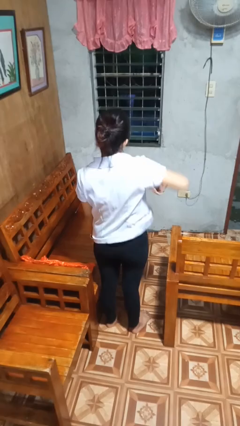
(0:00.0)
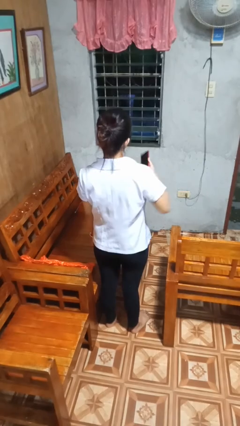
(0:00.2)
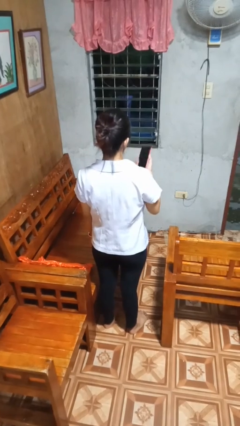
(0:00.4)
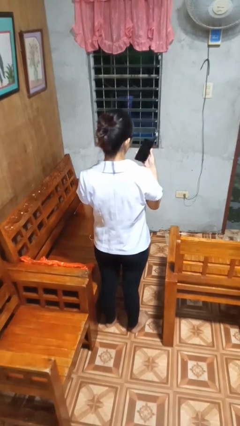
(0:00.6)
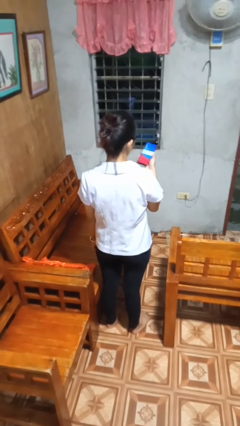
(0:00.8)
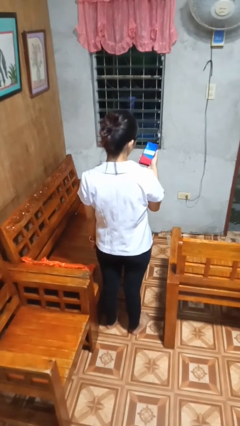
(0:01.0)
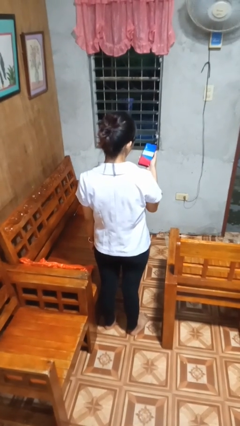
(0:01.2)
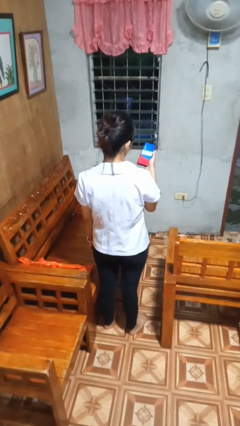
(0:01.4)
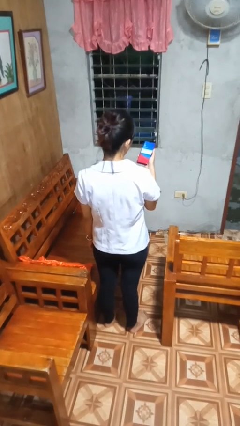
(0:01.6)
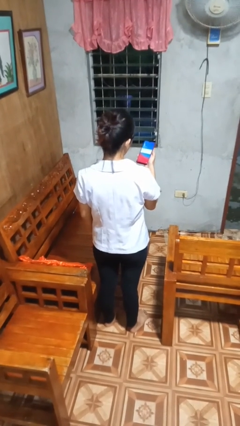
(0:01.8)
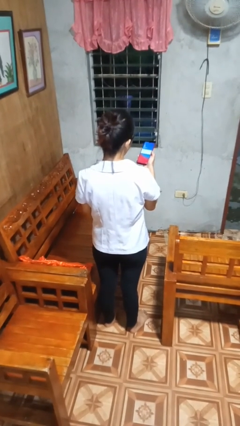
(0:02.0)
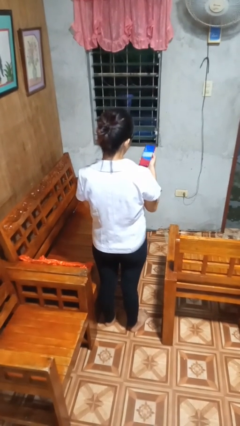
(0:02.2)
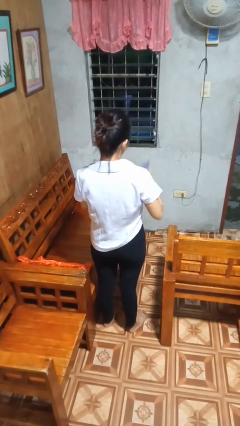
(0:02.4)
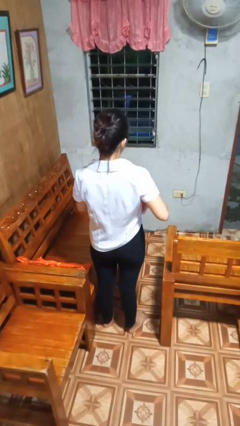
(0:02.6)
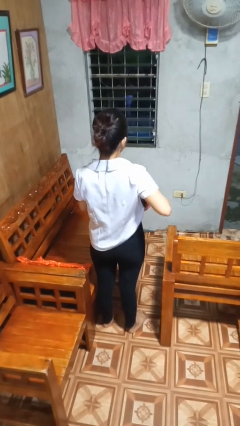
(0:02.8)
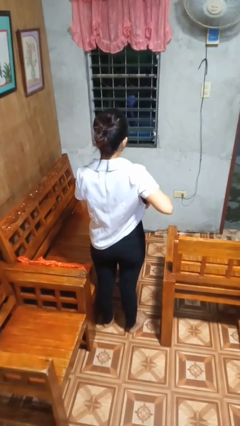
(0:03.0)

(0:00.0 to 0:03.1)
person takes phone from pocket

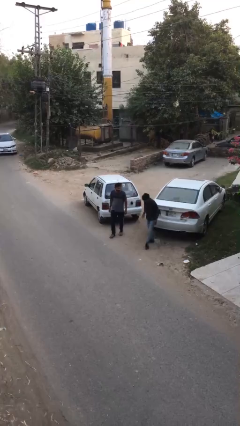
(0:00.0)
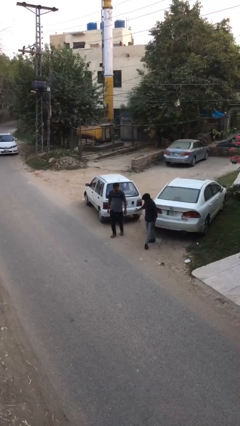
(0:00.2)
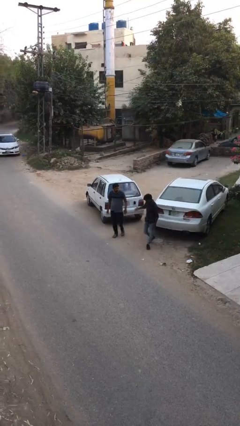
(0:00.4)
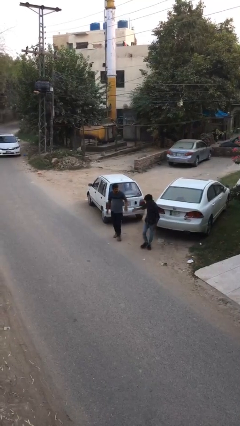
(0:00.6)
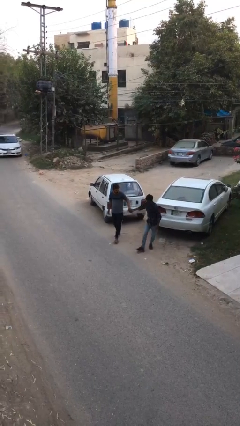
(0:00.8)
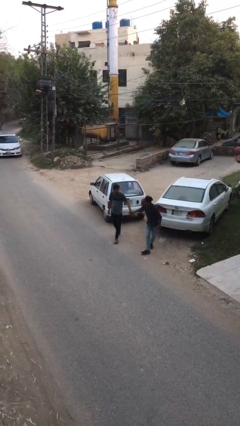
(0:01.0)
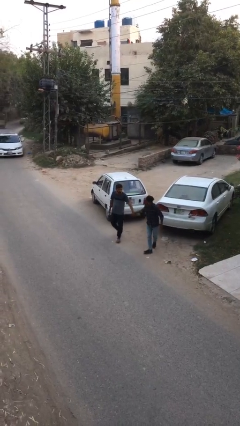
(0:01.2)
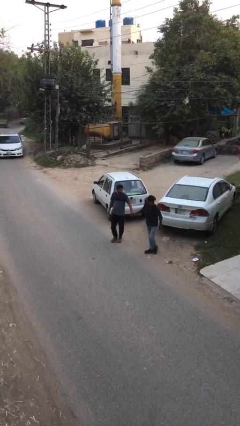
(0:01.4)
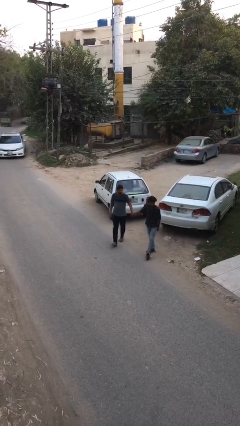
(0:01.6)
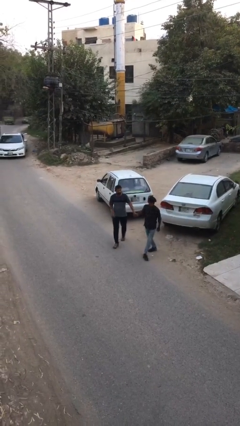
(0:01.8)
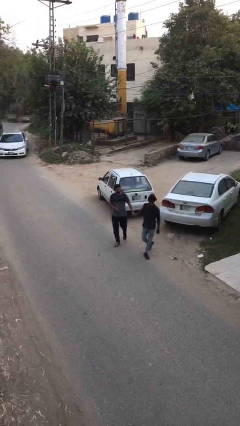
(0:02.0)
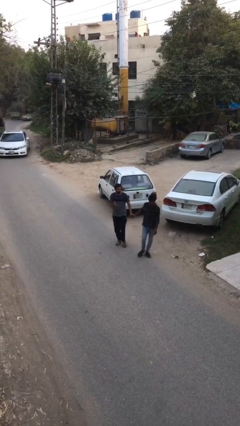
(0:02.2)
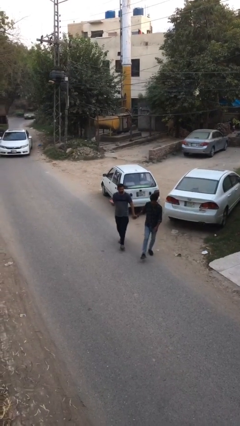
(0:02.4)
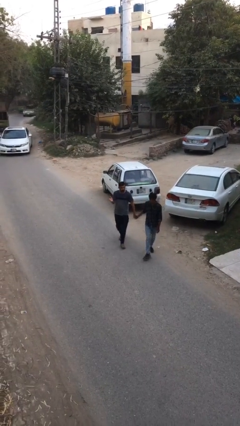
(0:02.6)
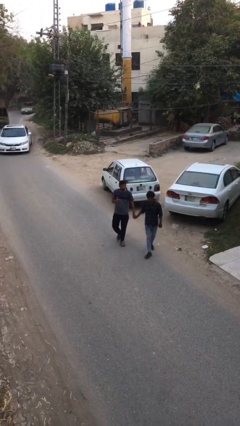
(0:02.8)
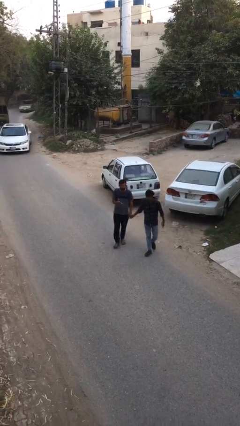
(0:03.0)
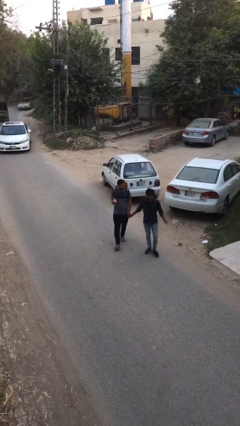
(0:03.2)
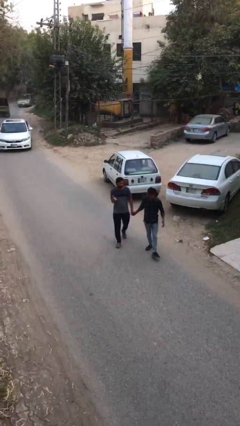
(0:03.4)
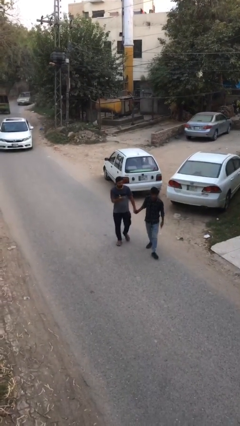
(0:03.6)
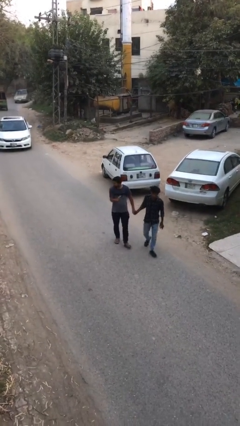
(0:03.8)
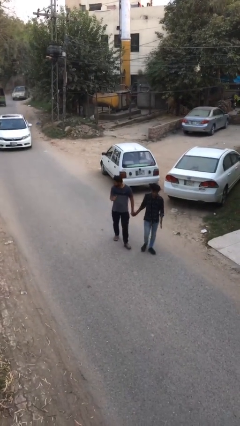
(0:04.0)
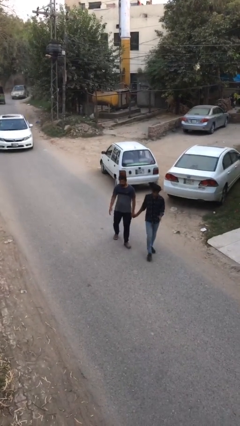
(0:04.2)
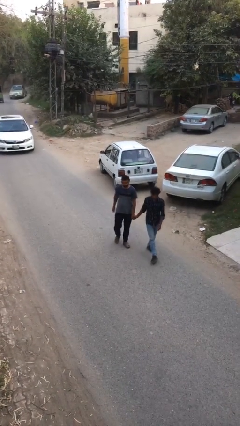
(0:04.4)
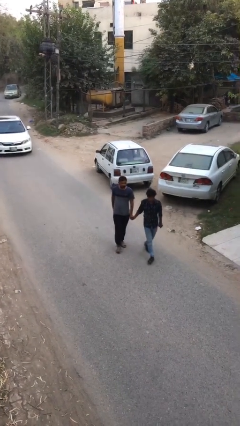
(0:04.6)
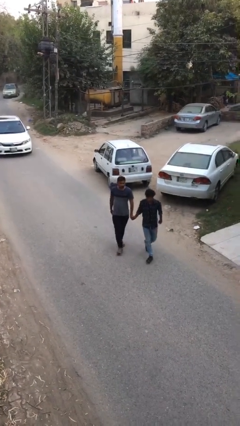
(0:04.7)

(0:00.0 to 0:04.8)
person holds hand

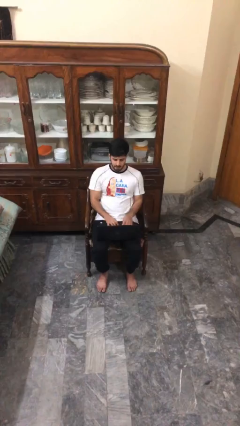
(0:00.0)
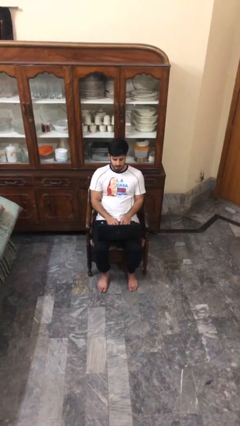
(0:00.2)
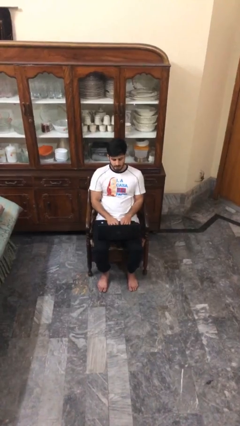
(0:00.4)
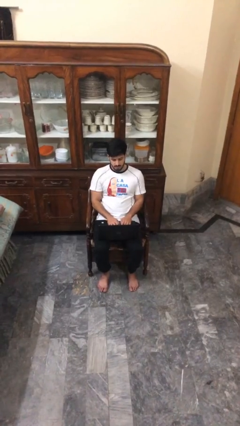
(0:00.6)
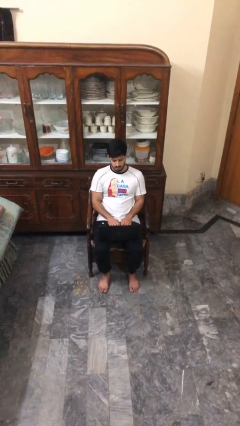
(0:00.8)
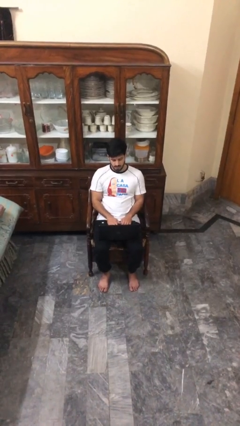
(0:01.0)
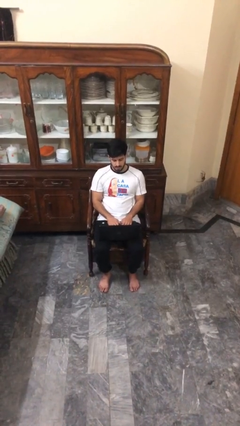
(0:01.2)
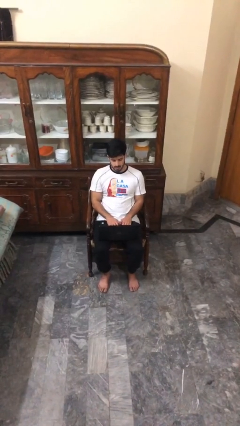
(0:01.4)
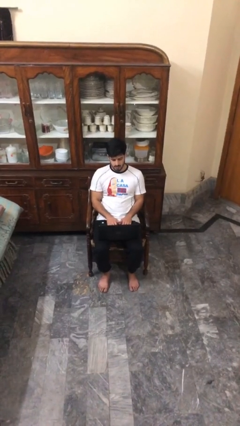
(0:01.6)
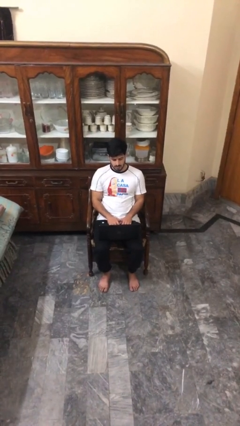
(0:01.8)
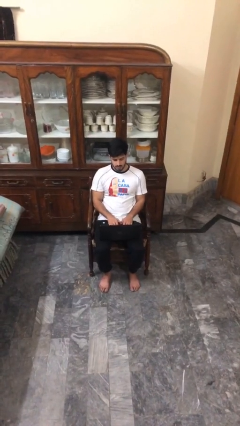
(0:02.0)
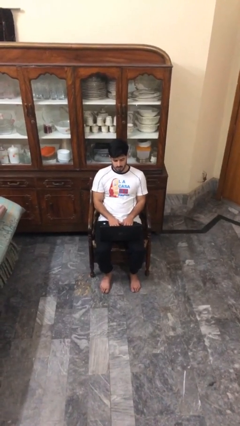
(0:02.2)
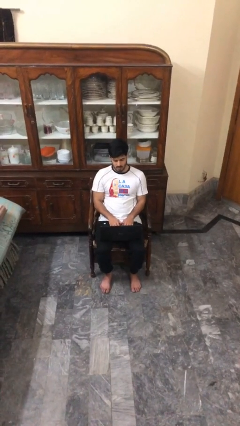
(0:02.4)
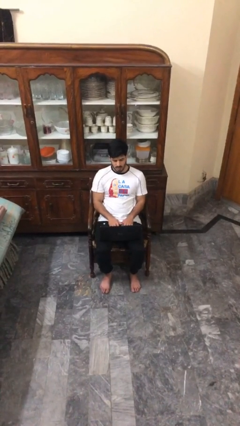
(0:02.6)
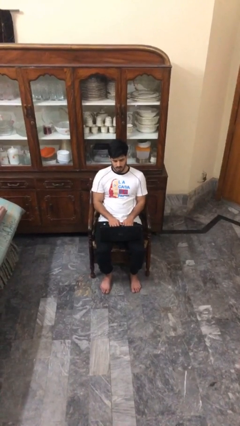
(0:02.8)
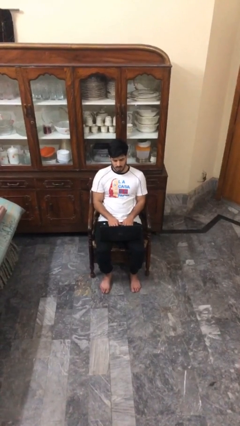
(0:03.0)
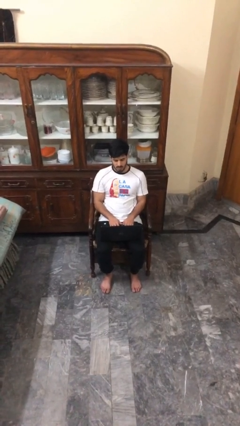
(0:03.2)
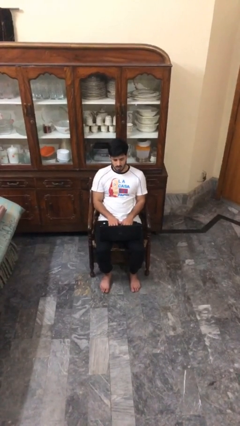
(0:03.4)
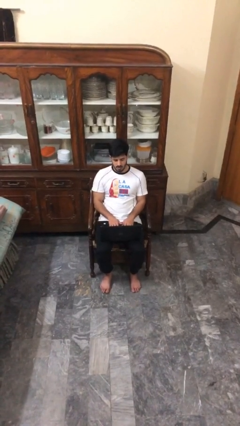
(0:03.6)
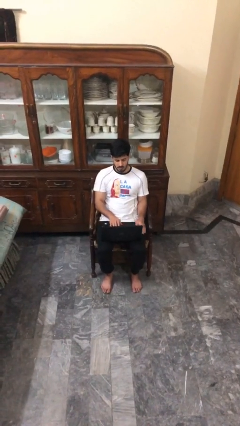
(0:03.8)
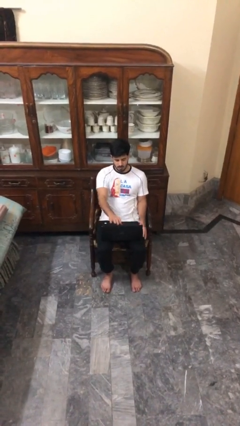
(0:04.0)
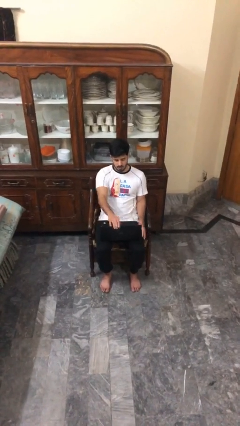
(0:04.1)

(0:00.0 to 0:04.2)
person interacts with laptop

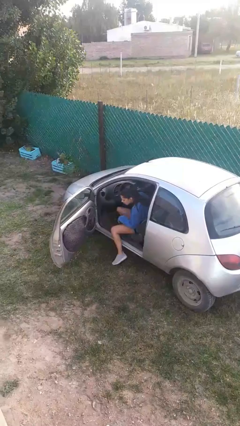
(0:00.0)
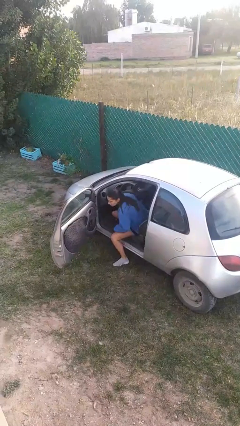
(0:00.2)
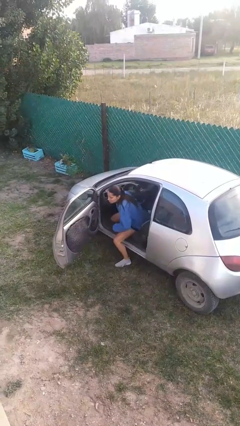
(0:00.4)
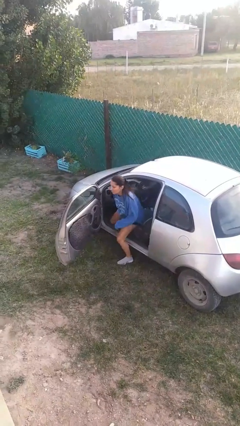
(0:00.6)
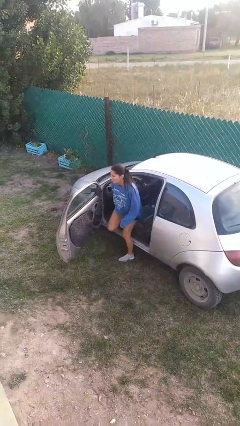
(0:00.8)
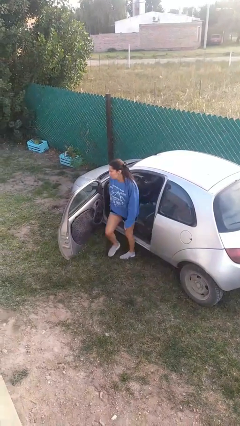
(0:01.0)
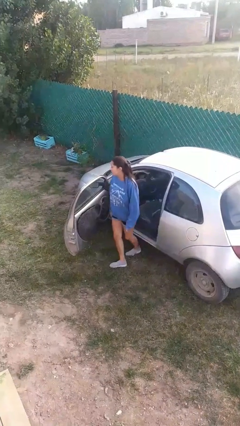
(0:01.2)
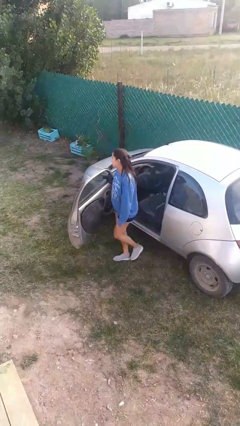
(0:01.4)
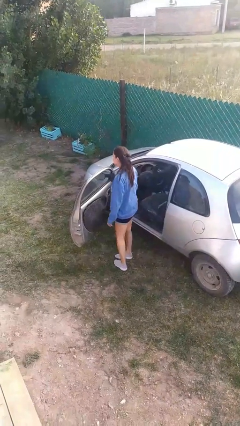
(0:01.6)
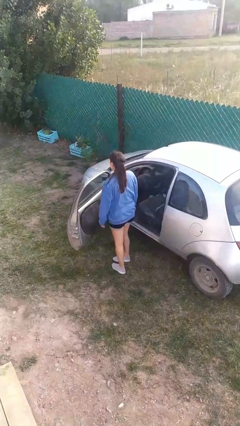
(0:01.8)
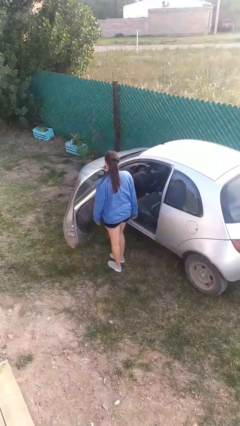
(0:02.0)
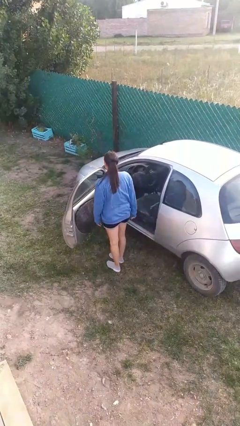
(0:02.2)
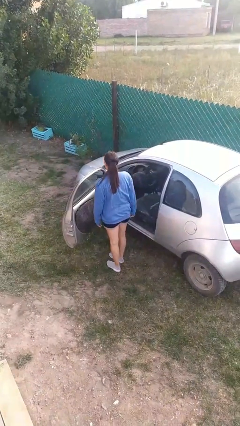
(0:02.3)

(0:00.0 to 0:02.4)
person exits car

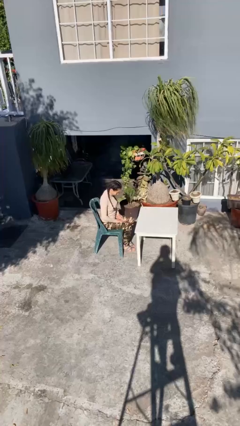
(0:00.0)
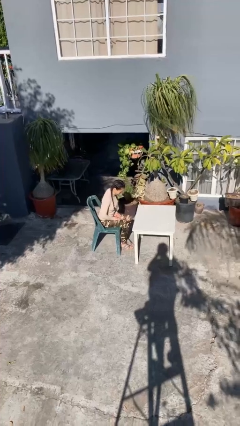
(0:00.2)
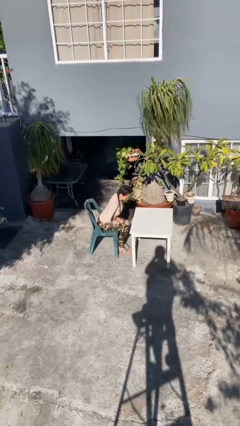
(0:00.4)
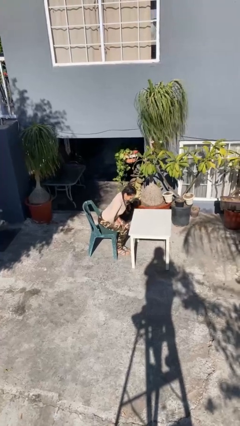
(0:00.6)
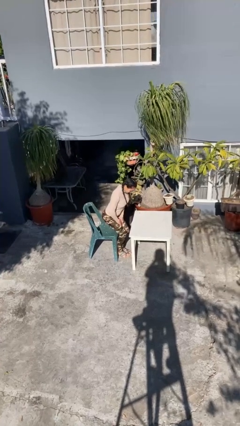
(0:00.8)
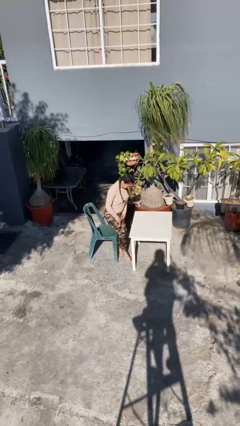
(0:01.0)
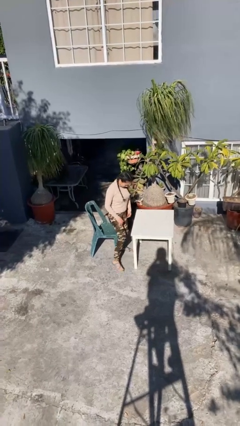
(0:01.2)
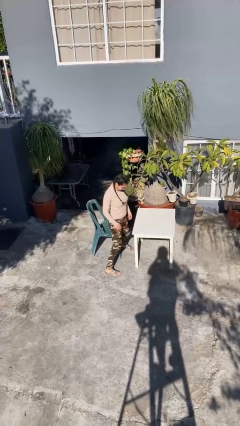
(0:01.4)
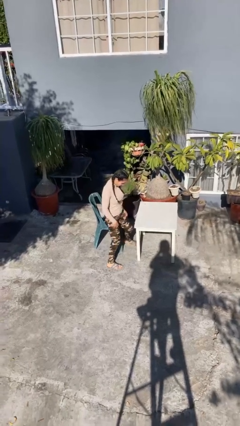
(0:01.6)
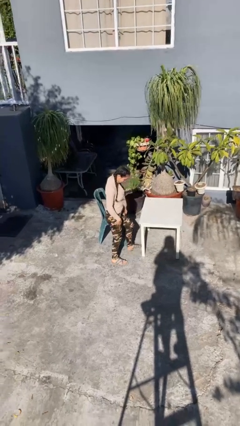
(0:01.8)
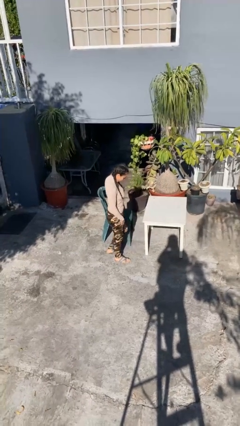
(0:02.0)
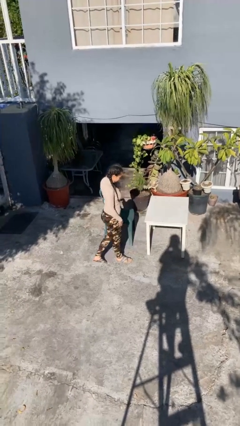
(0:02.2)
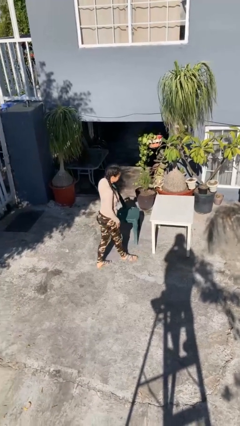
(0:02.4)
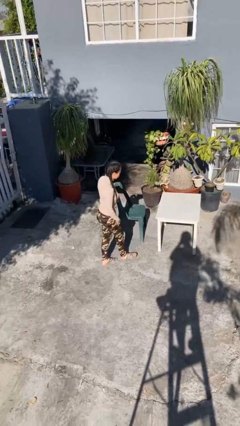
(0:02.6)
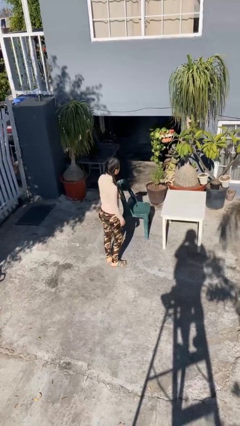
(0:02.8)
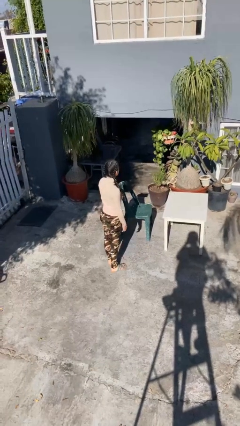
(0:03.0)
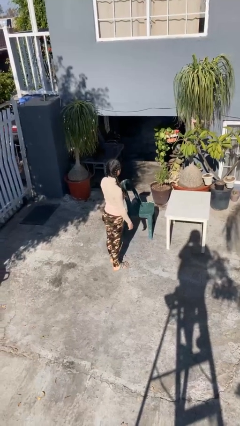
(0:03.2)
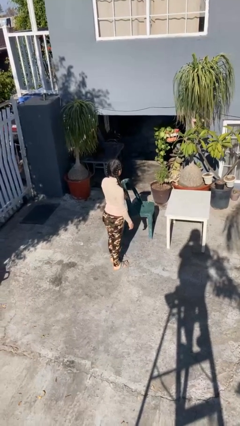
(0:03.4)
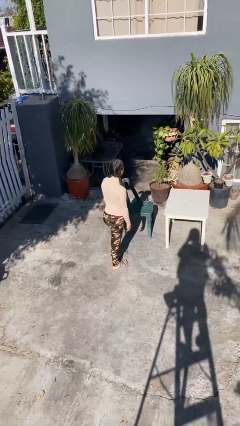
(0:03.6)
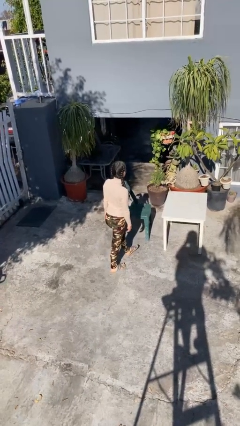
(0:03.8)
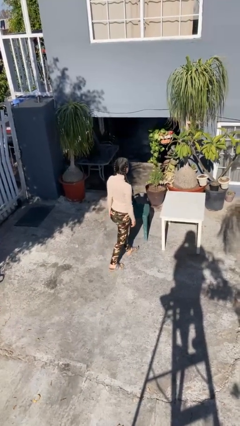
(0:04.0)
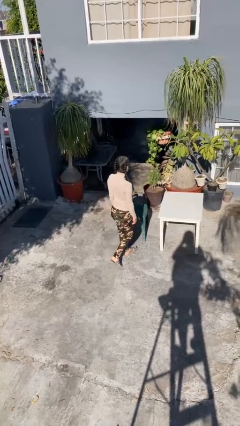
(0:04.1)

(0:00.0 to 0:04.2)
person stands up
